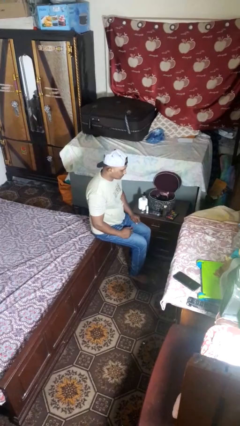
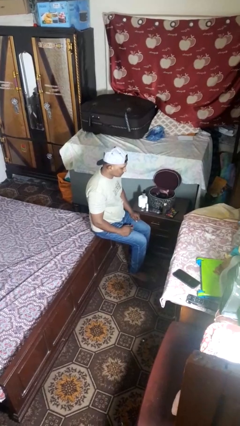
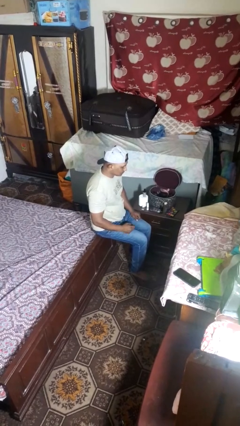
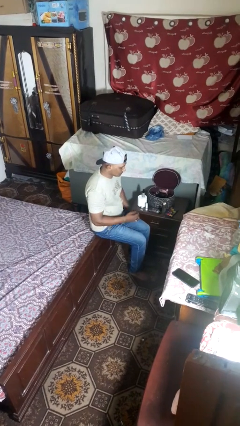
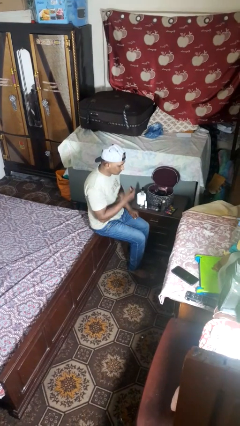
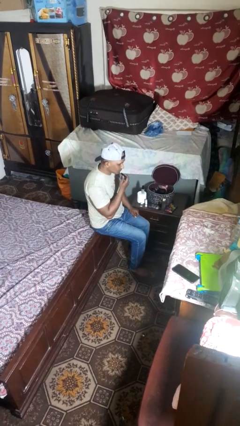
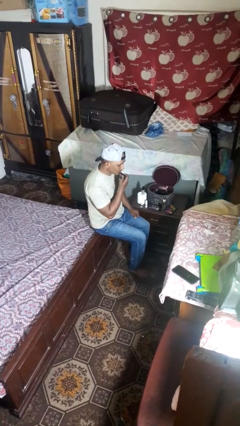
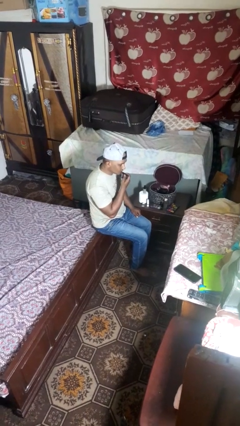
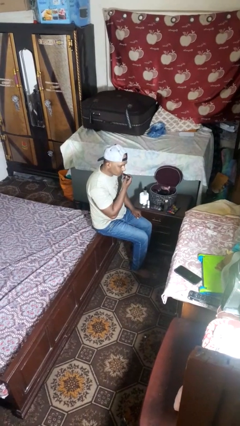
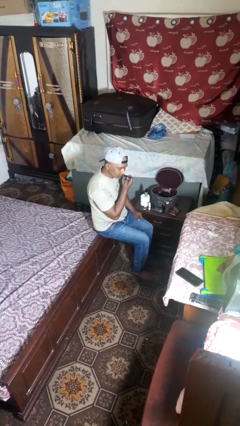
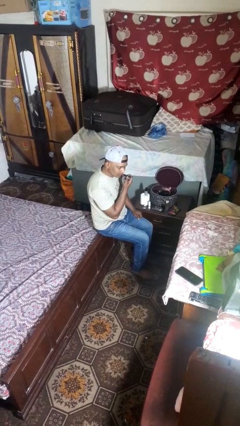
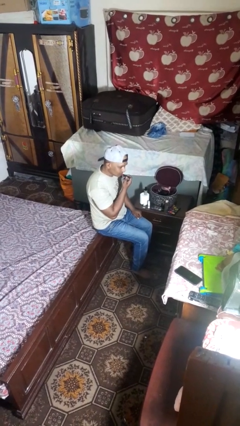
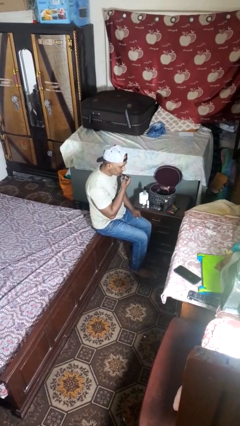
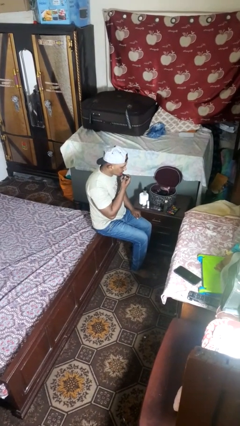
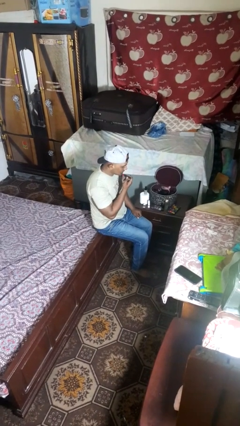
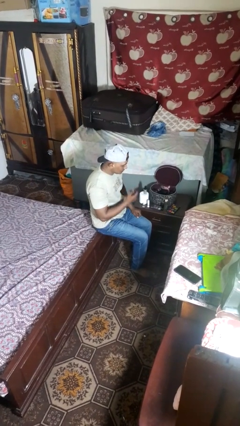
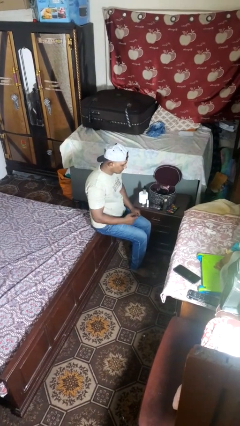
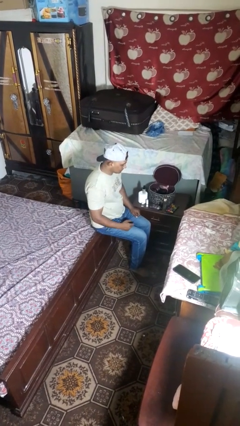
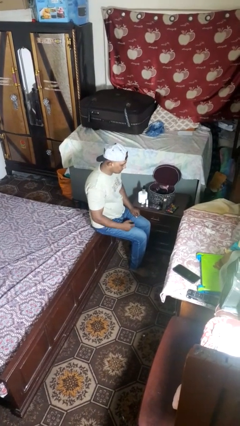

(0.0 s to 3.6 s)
person applies lip makeup

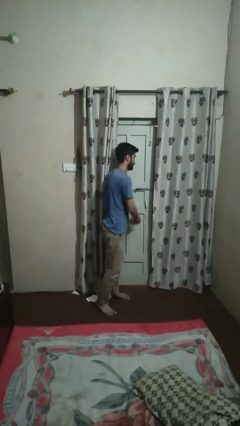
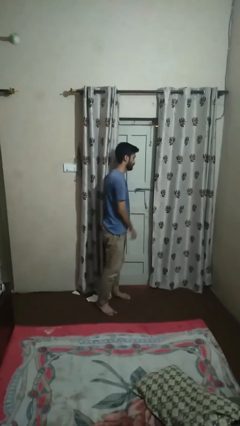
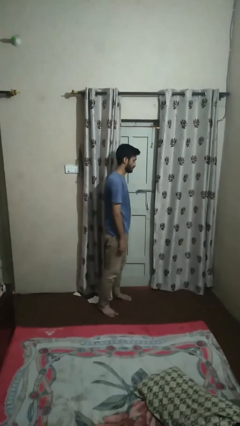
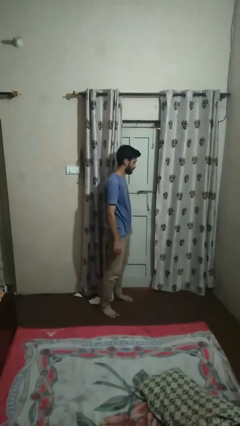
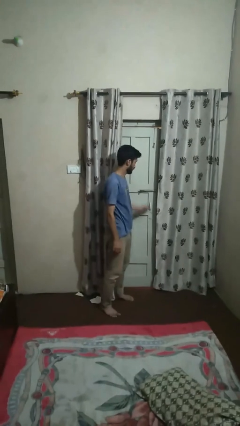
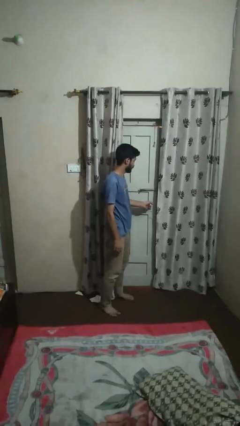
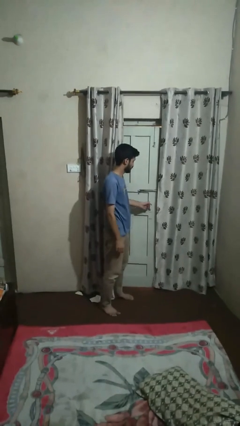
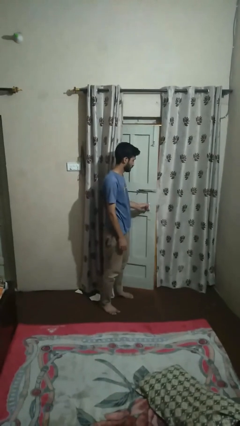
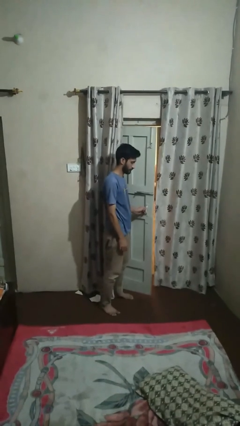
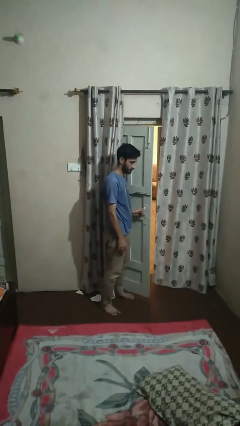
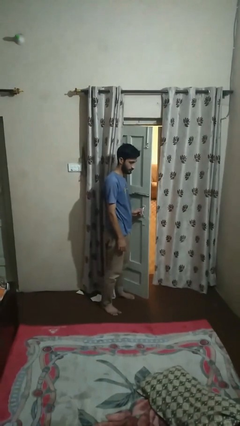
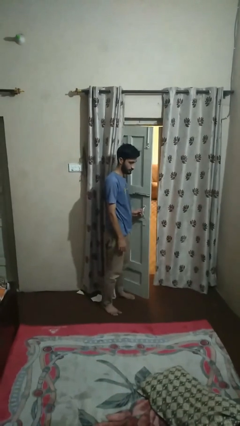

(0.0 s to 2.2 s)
person opens facility door

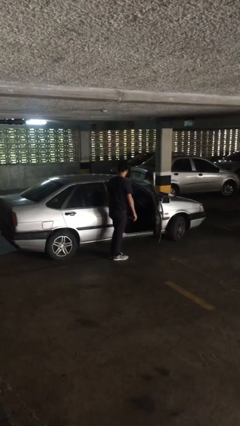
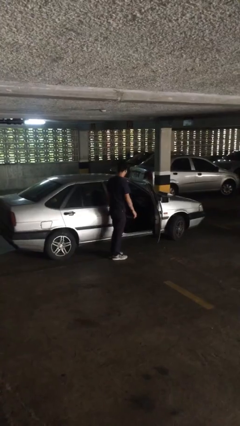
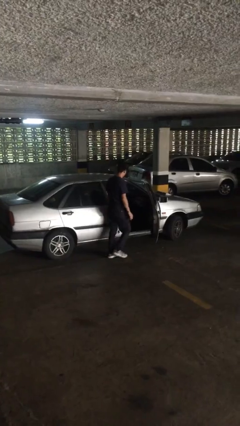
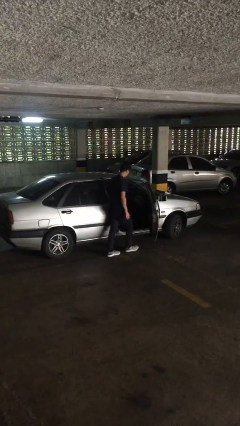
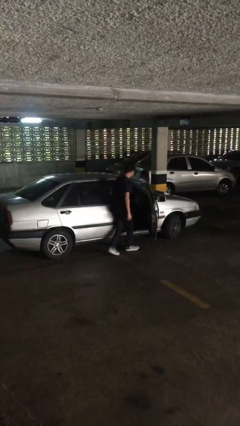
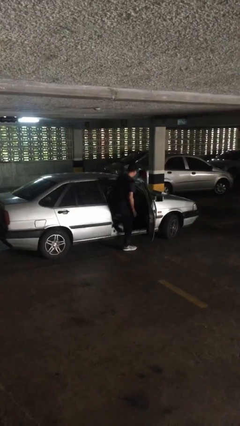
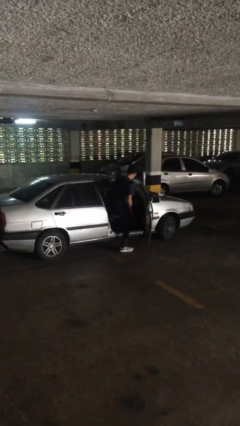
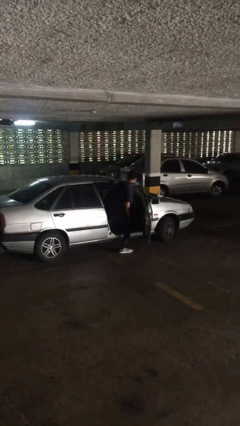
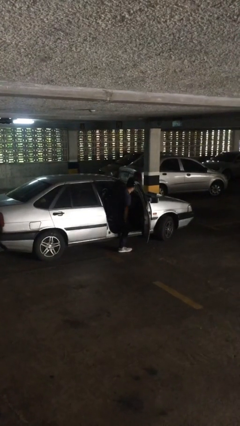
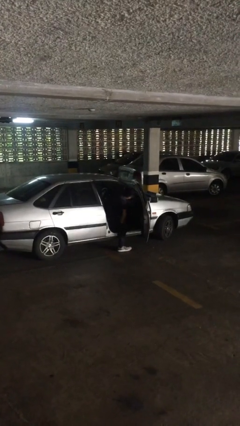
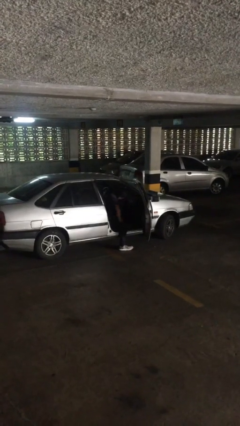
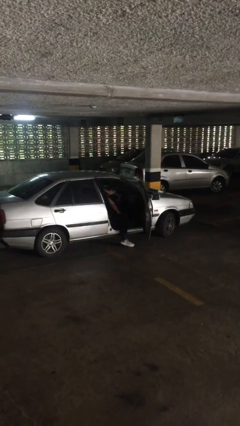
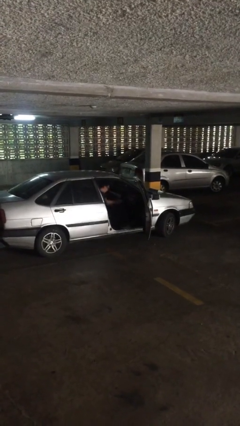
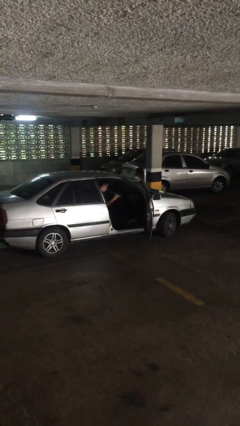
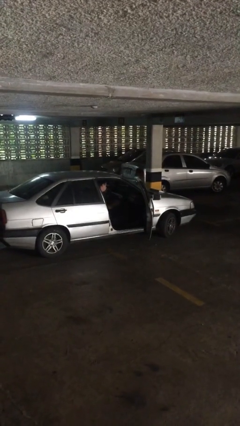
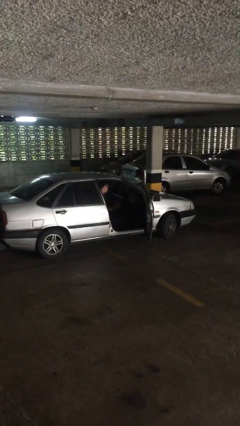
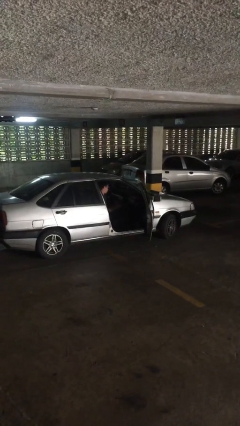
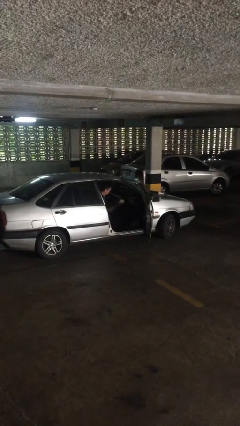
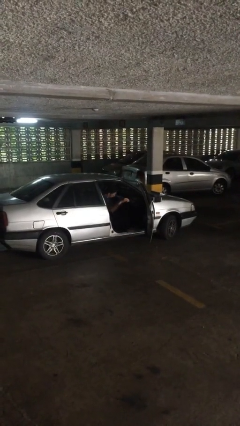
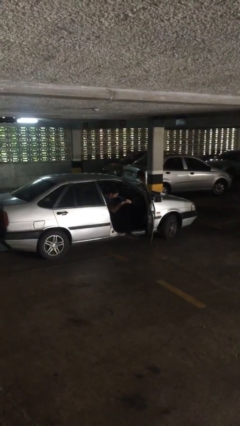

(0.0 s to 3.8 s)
person enters car

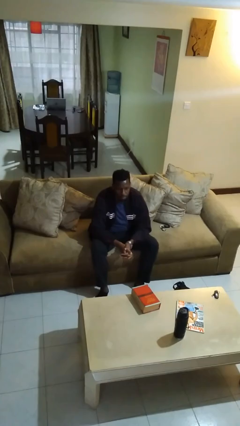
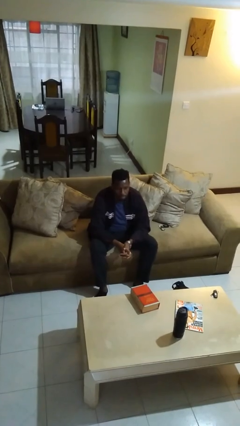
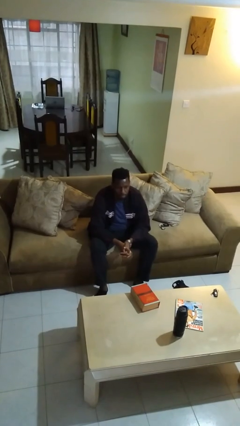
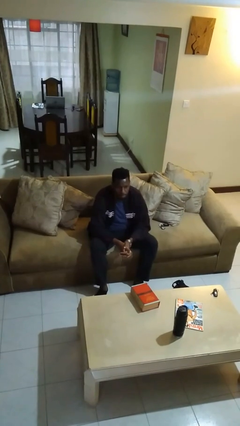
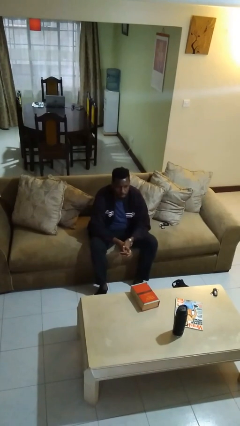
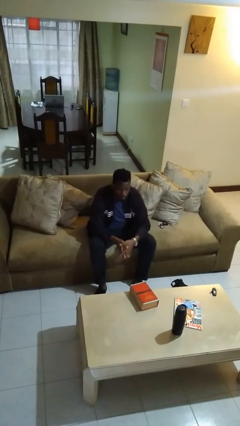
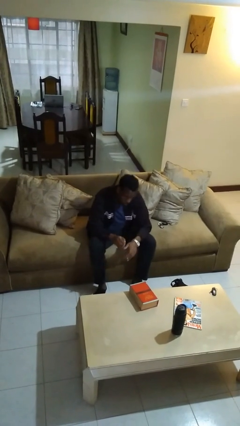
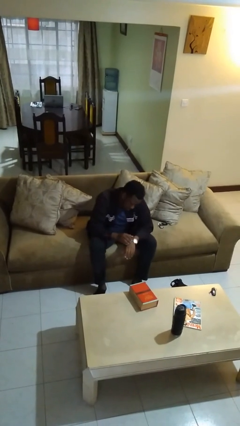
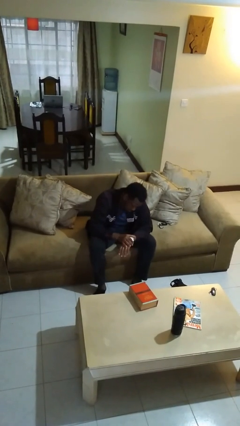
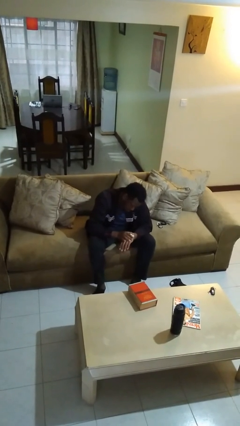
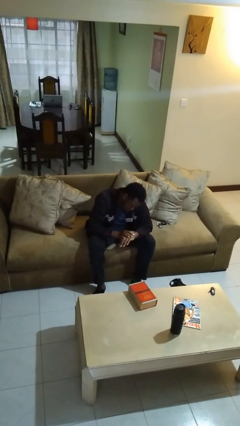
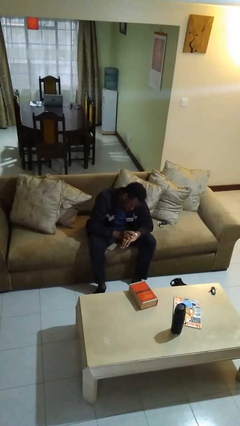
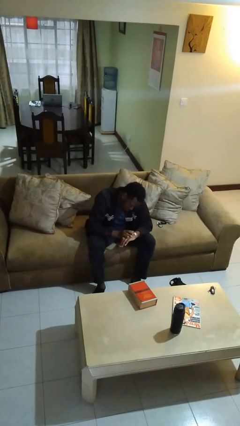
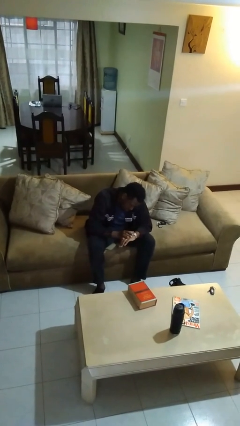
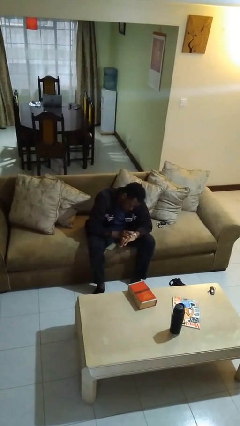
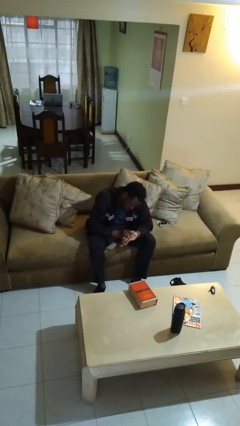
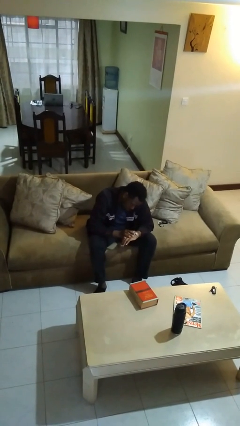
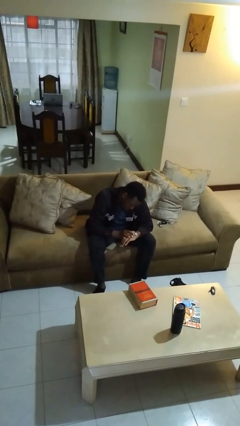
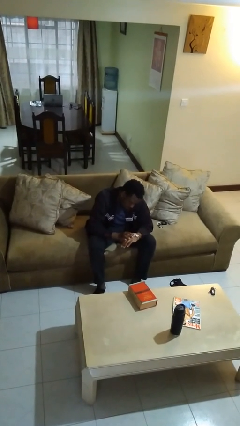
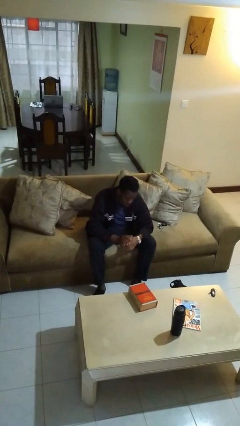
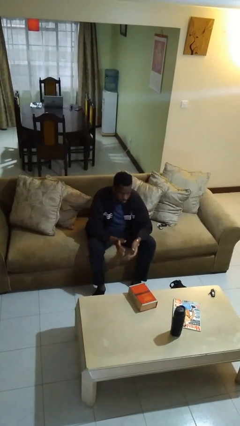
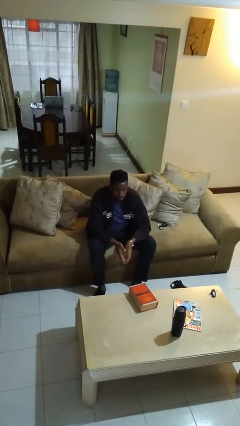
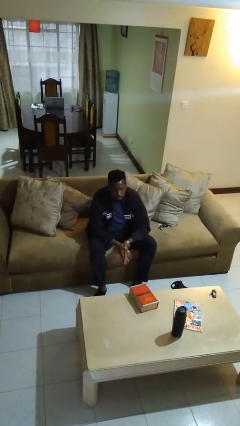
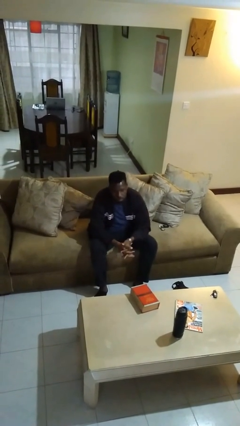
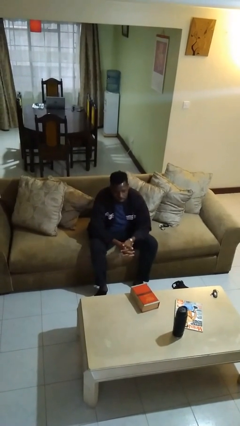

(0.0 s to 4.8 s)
person looks at wristwatch

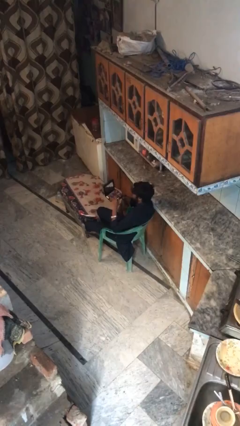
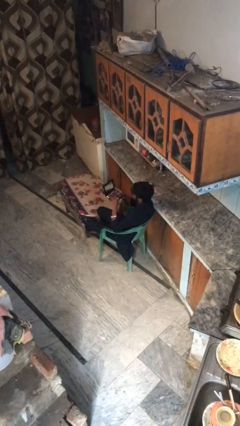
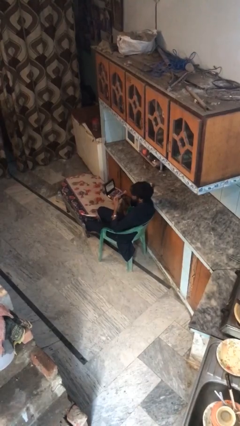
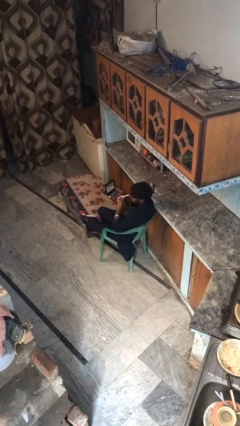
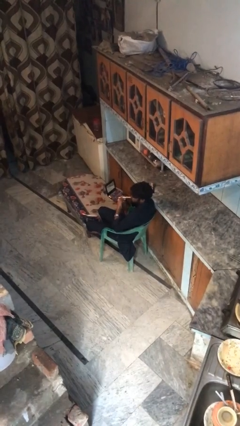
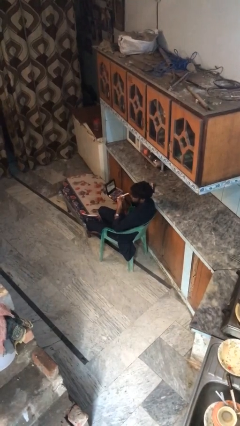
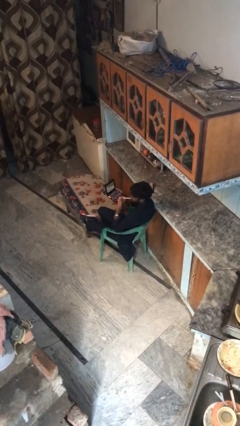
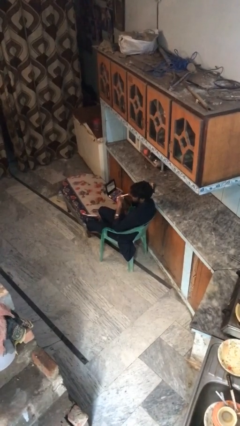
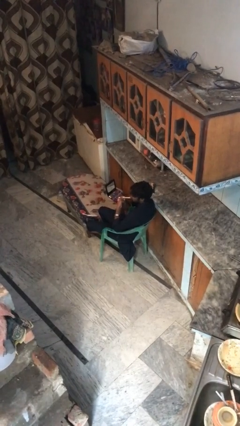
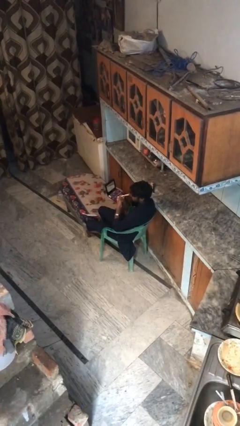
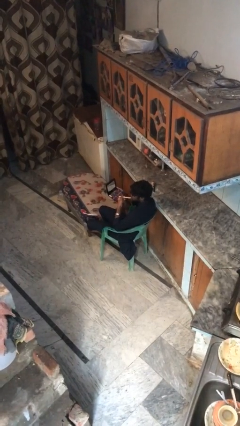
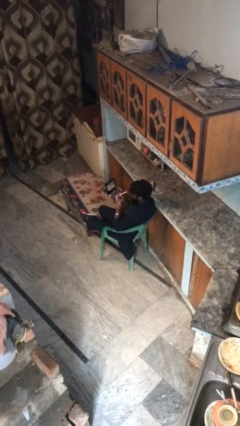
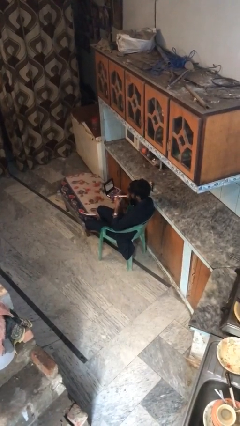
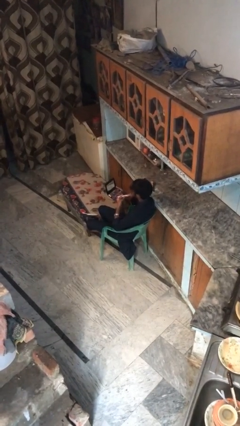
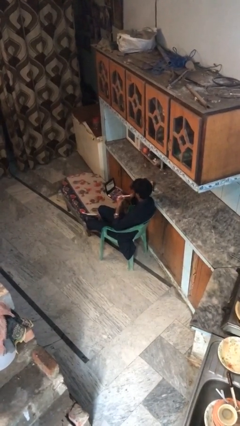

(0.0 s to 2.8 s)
person applies foundation makeup
